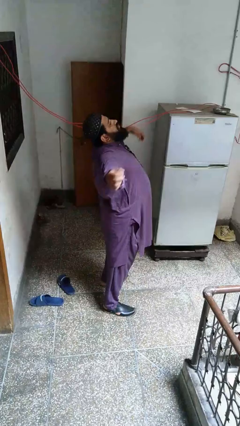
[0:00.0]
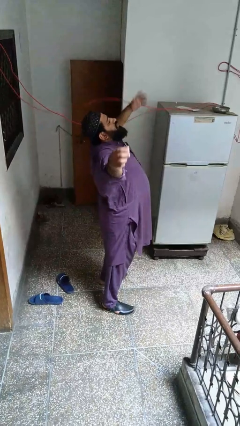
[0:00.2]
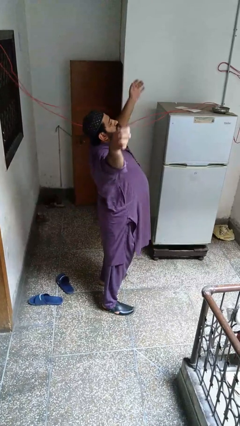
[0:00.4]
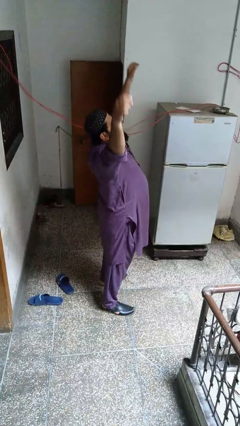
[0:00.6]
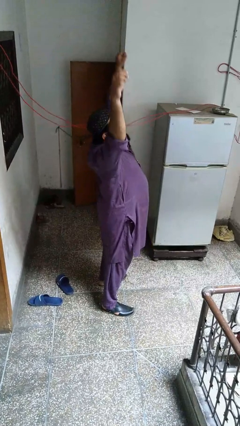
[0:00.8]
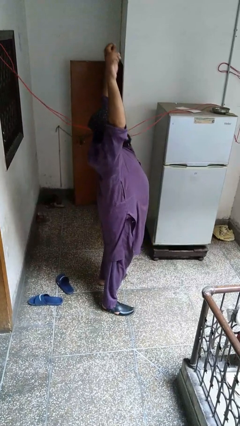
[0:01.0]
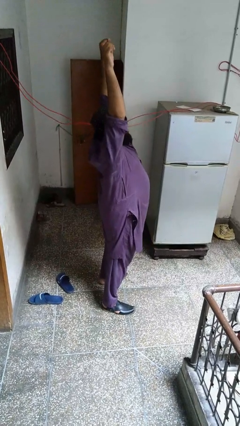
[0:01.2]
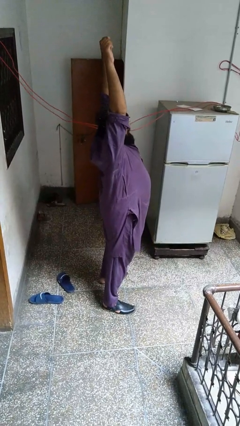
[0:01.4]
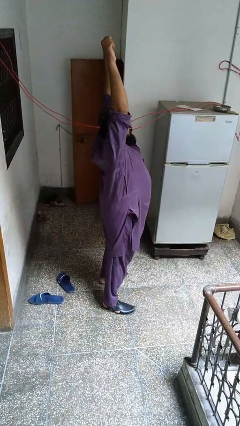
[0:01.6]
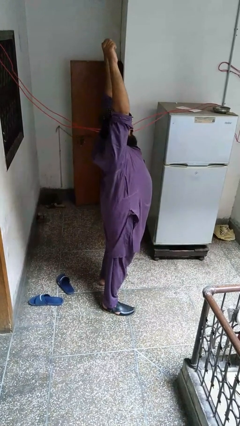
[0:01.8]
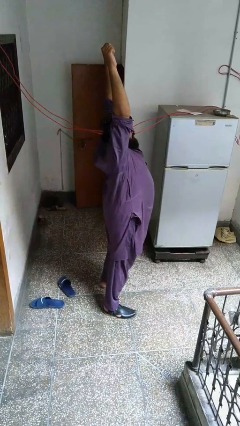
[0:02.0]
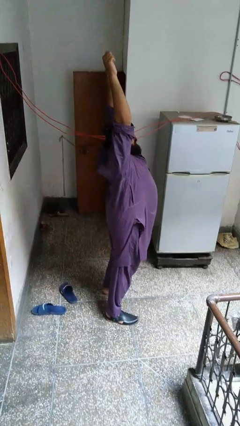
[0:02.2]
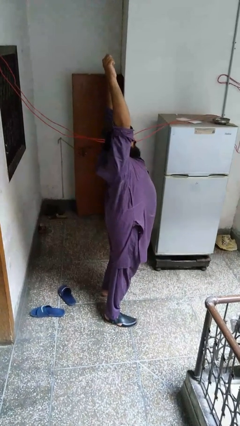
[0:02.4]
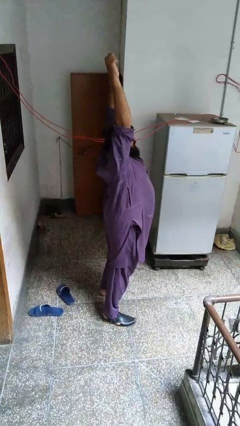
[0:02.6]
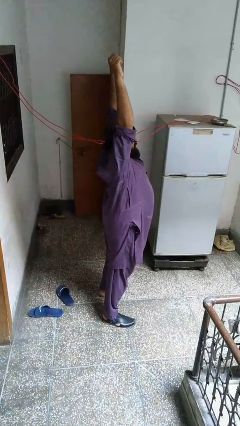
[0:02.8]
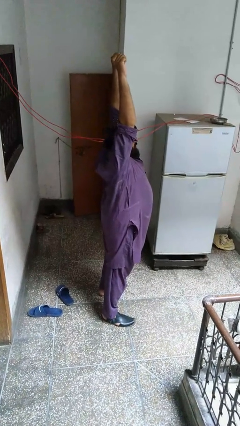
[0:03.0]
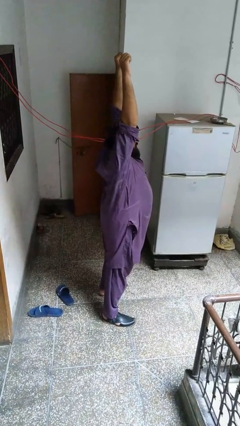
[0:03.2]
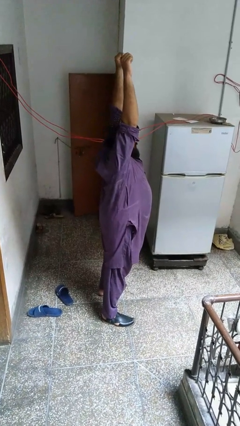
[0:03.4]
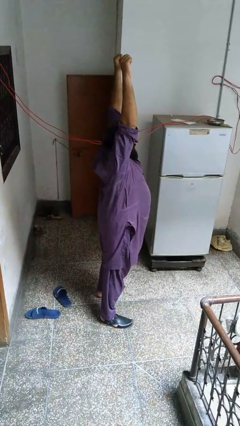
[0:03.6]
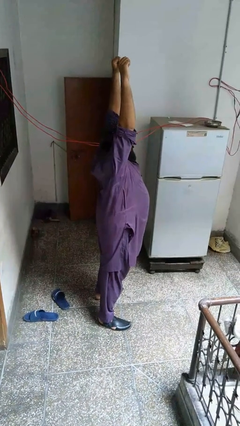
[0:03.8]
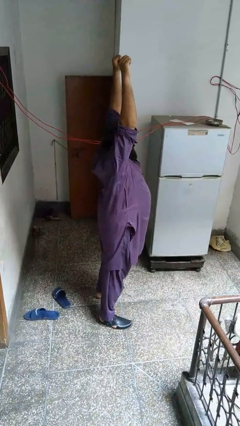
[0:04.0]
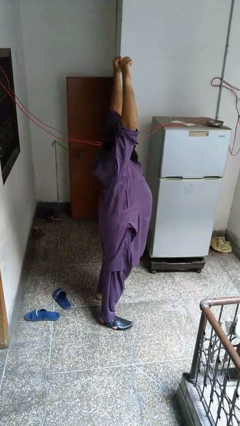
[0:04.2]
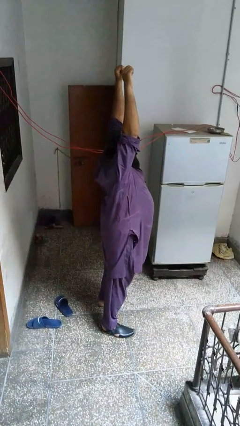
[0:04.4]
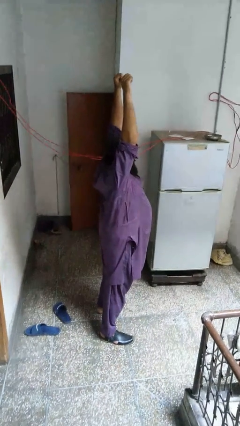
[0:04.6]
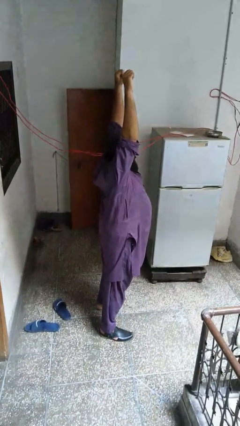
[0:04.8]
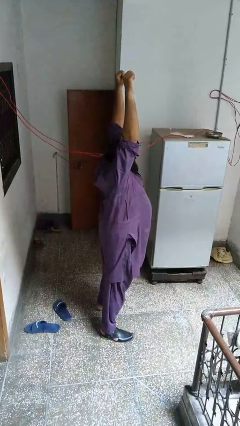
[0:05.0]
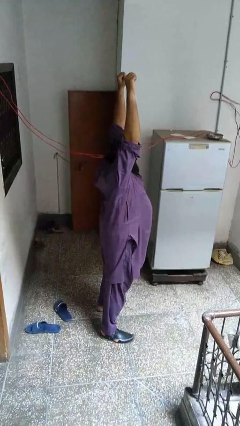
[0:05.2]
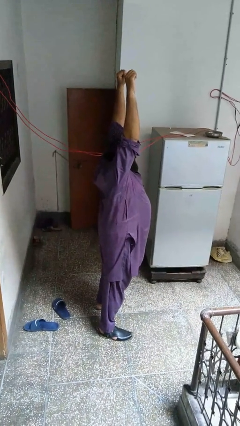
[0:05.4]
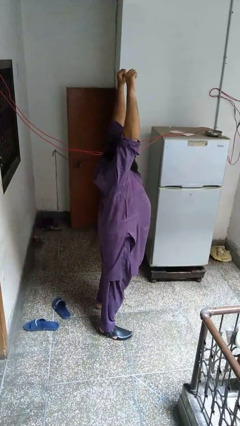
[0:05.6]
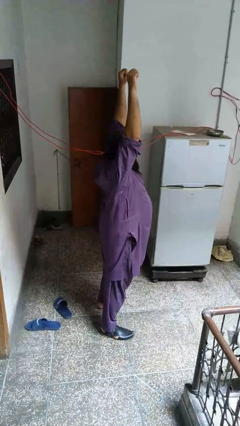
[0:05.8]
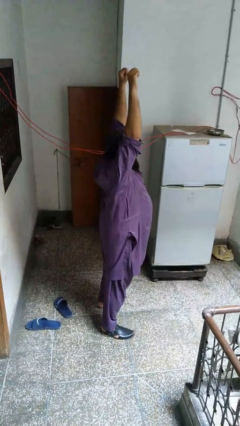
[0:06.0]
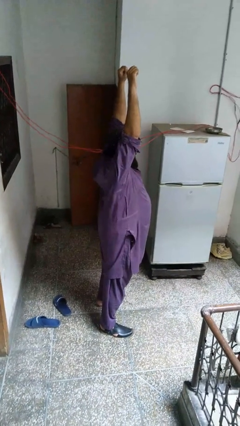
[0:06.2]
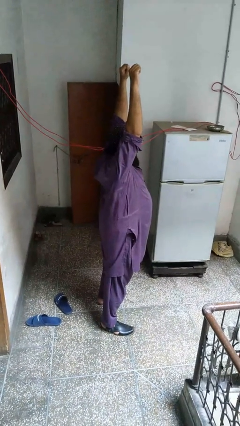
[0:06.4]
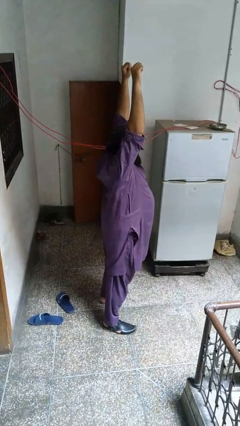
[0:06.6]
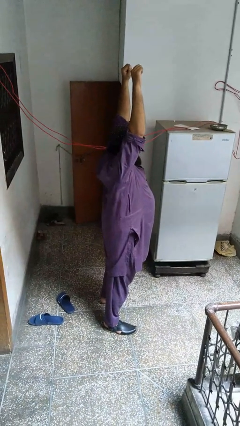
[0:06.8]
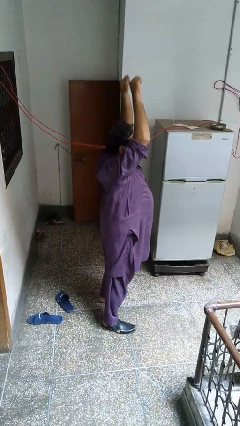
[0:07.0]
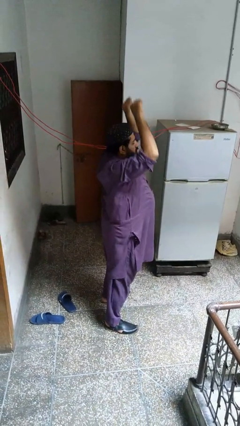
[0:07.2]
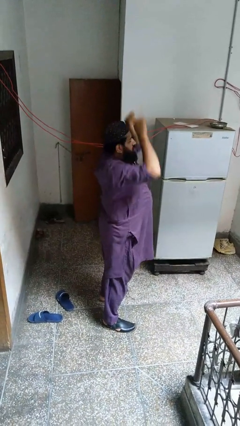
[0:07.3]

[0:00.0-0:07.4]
person stretches arms over head

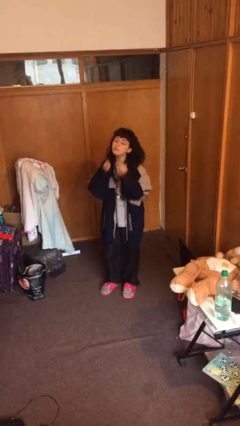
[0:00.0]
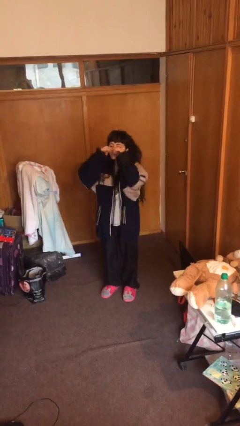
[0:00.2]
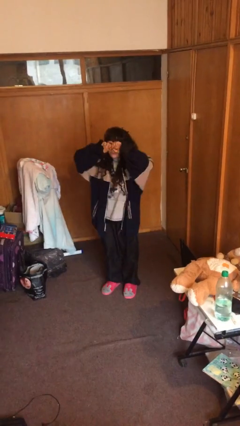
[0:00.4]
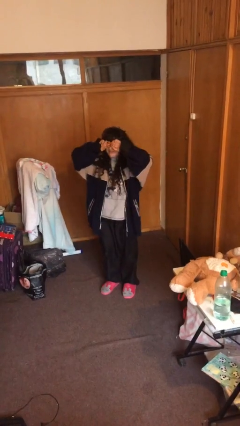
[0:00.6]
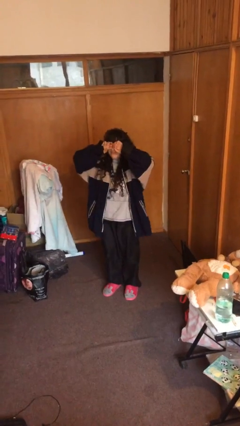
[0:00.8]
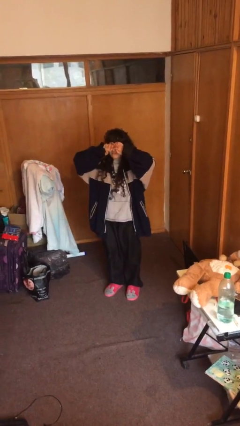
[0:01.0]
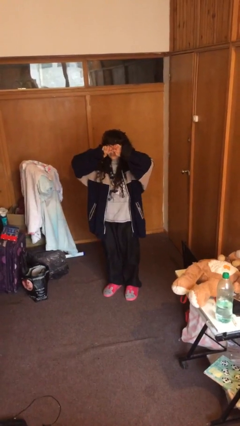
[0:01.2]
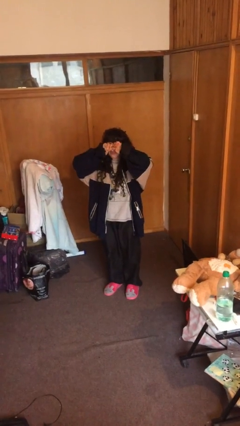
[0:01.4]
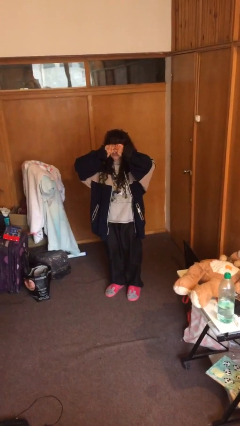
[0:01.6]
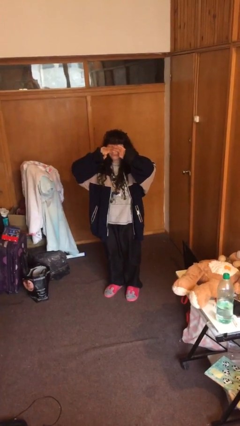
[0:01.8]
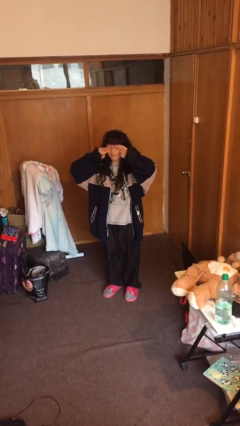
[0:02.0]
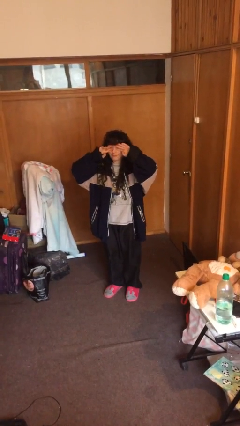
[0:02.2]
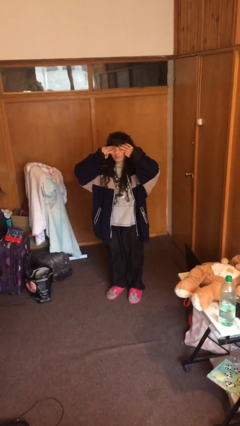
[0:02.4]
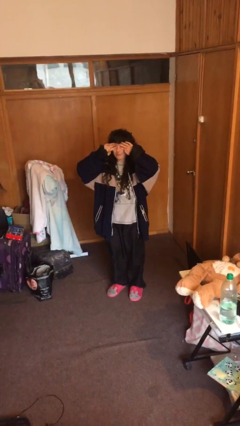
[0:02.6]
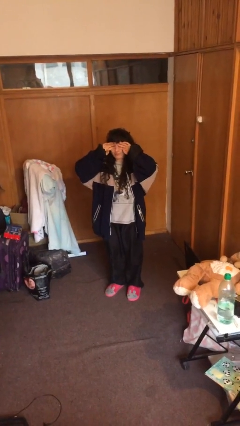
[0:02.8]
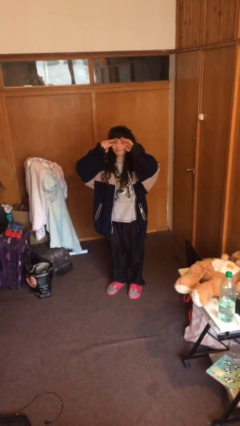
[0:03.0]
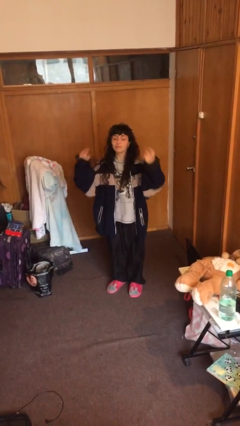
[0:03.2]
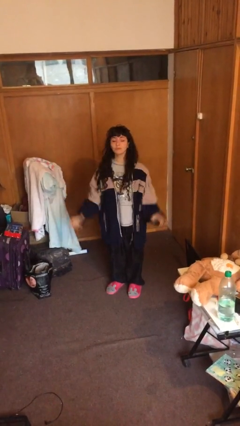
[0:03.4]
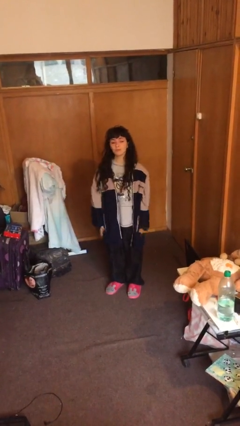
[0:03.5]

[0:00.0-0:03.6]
person rubs eyes

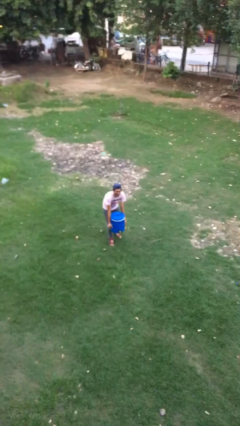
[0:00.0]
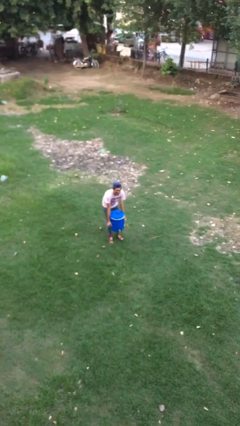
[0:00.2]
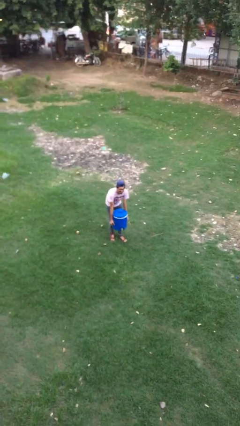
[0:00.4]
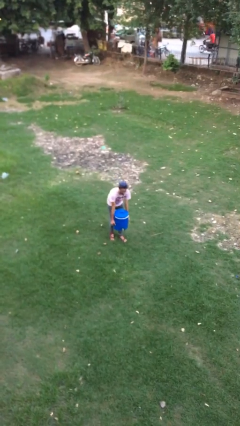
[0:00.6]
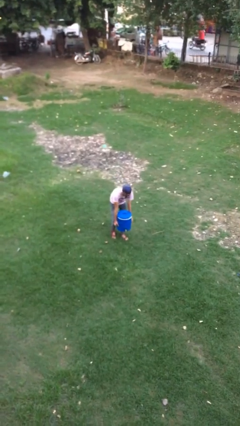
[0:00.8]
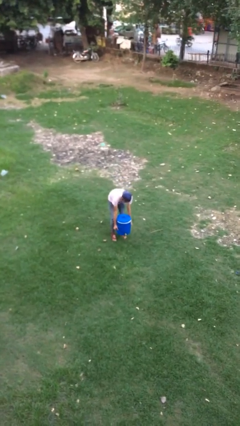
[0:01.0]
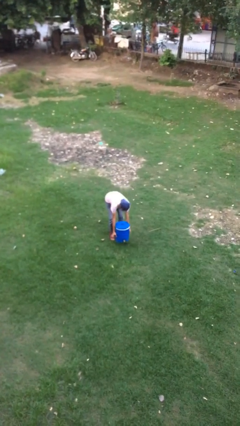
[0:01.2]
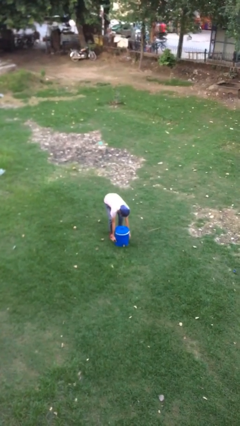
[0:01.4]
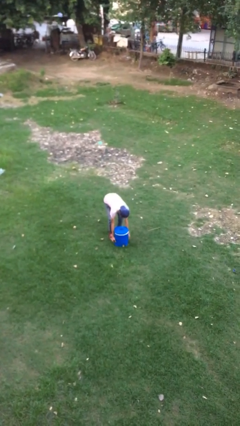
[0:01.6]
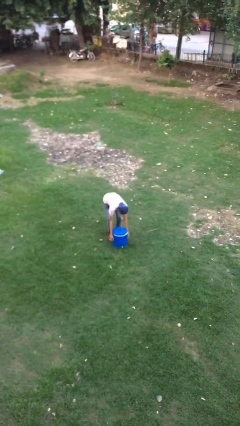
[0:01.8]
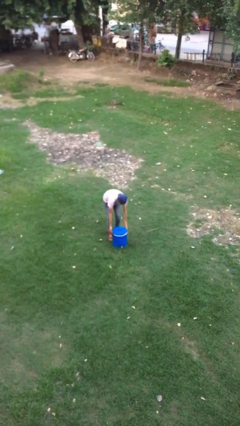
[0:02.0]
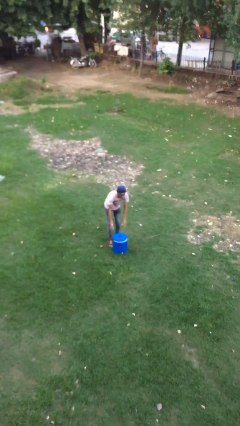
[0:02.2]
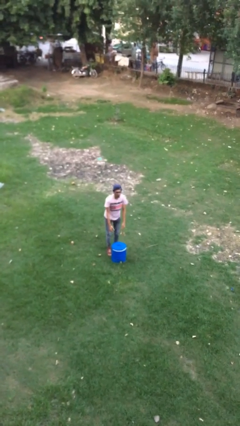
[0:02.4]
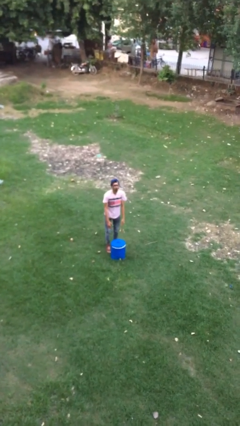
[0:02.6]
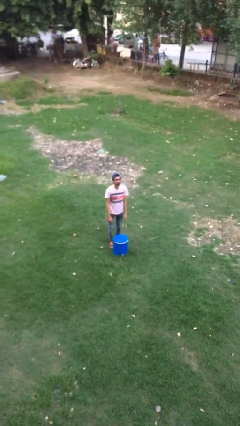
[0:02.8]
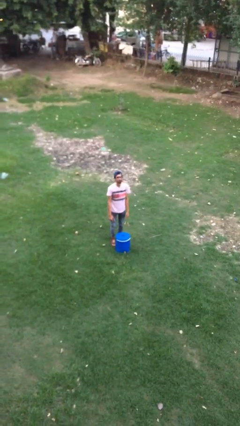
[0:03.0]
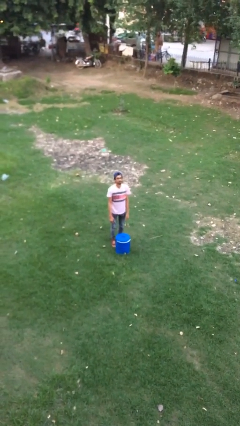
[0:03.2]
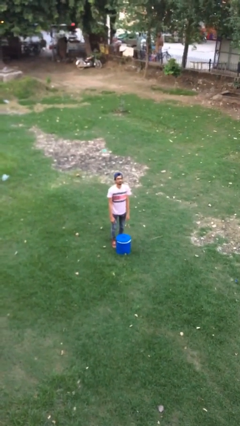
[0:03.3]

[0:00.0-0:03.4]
person puts down object on floor

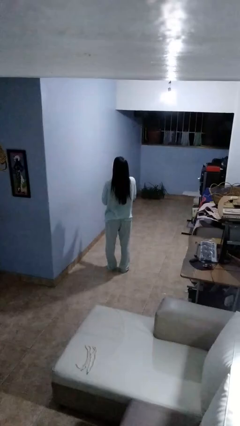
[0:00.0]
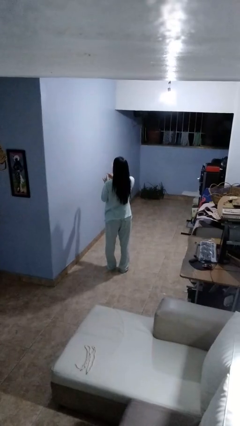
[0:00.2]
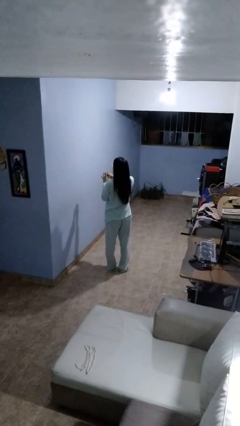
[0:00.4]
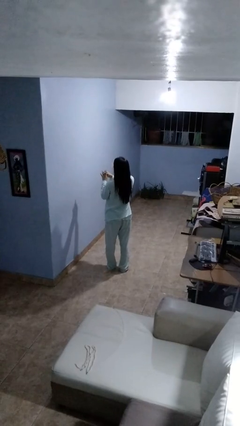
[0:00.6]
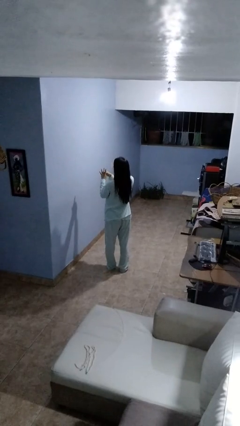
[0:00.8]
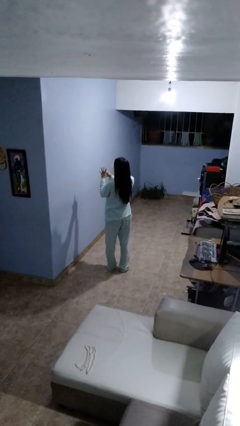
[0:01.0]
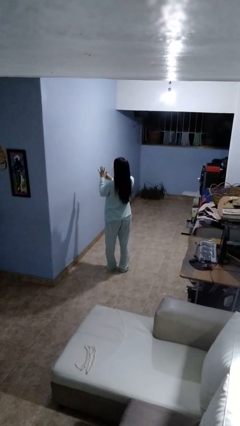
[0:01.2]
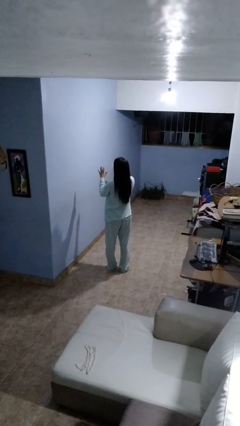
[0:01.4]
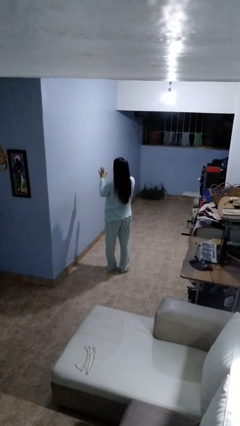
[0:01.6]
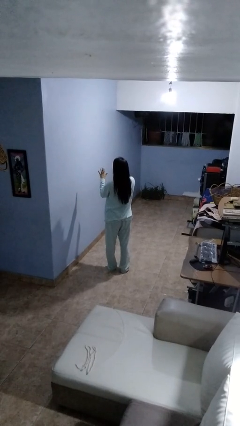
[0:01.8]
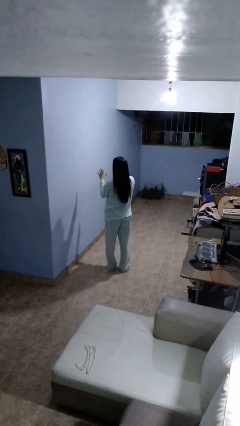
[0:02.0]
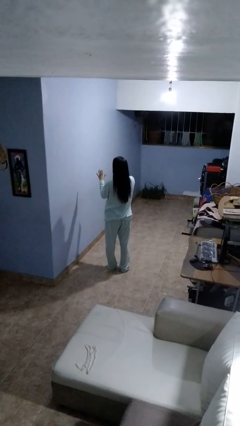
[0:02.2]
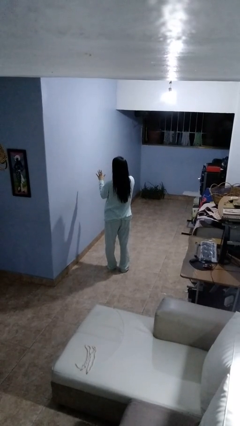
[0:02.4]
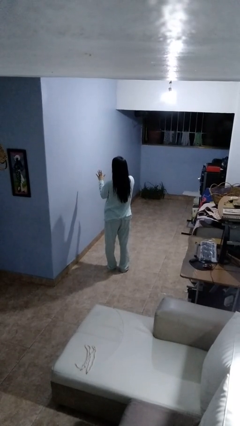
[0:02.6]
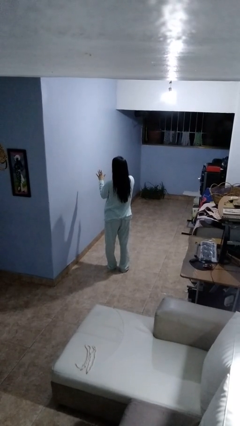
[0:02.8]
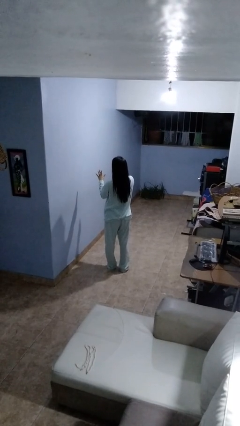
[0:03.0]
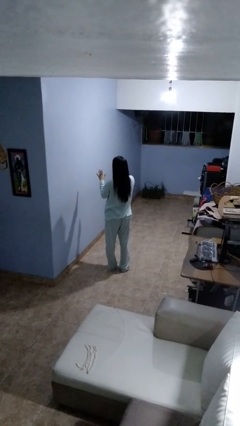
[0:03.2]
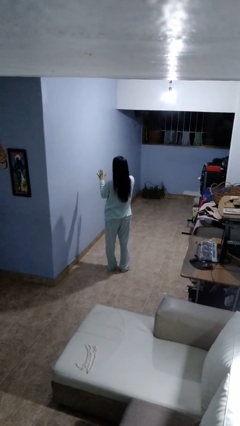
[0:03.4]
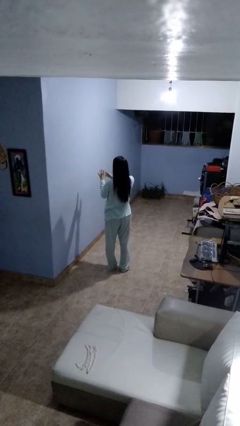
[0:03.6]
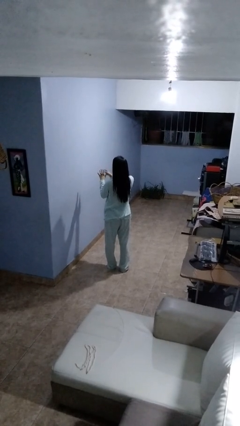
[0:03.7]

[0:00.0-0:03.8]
person puts on ring
